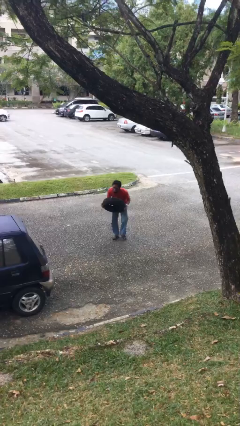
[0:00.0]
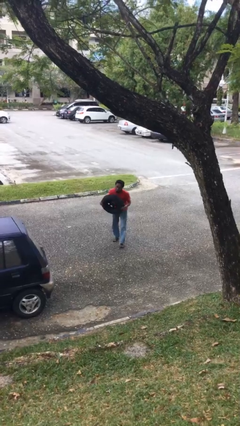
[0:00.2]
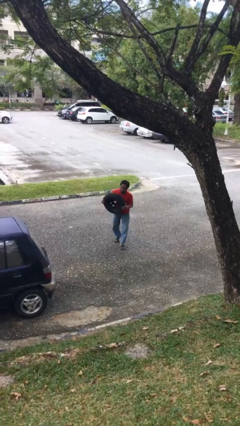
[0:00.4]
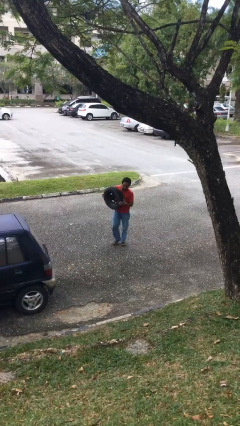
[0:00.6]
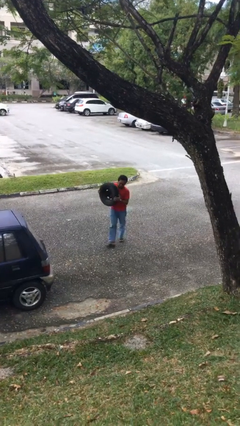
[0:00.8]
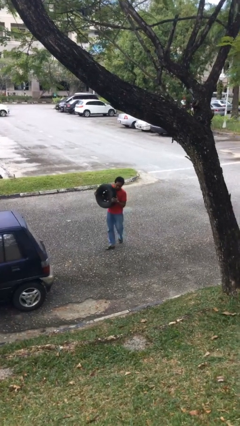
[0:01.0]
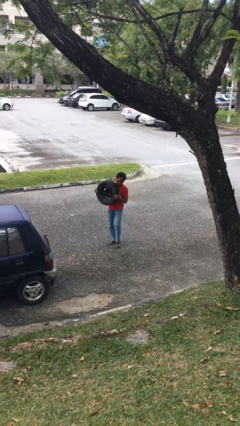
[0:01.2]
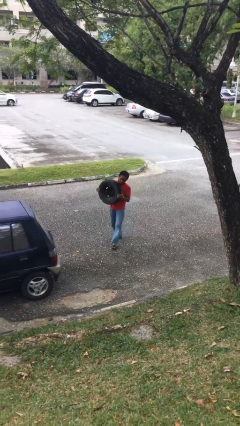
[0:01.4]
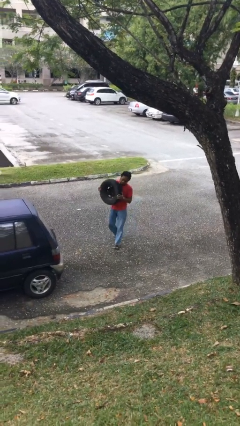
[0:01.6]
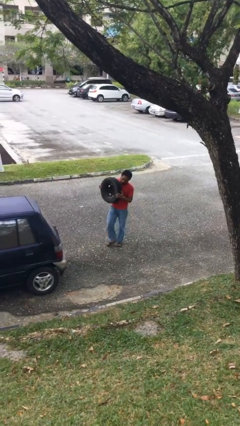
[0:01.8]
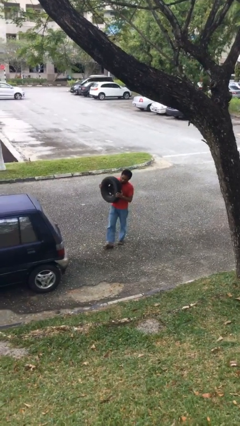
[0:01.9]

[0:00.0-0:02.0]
person carries heavy object

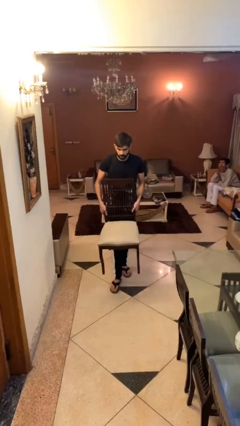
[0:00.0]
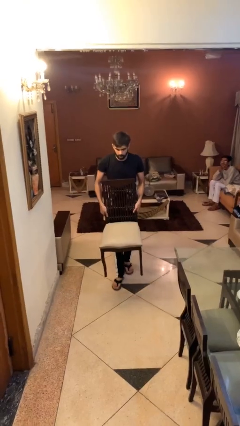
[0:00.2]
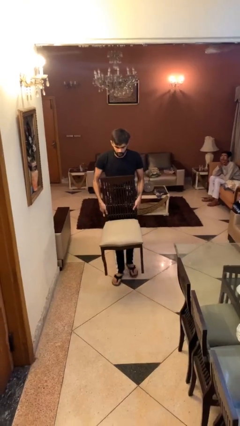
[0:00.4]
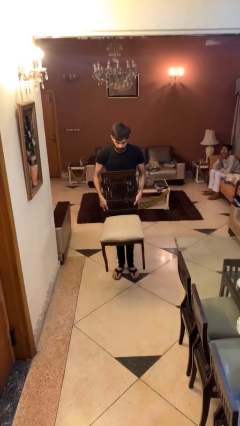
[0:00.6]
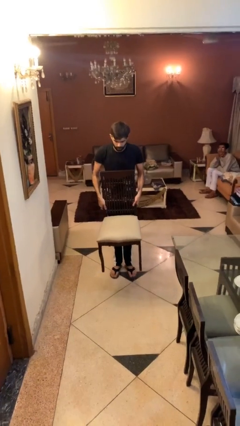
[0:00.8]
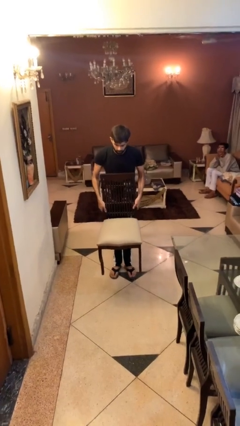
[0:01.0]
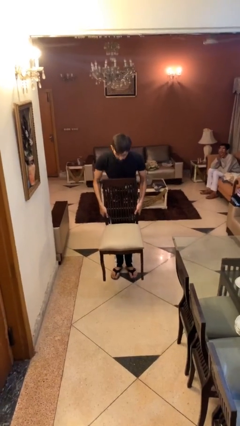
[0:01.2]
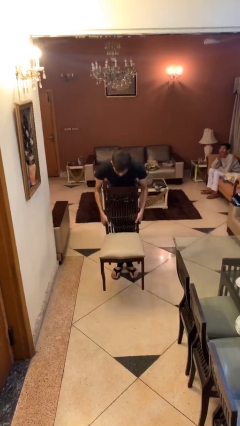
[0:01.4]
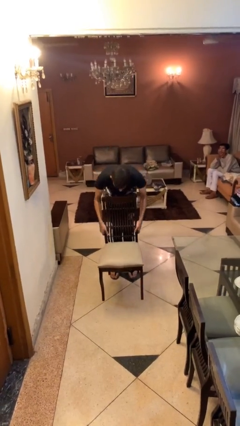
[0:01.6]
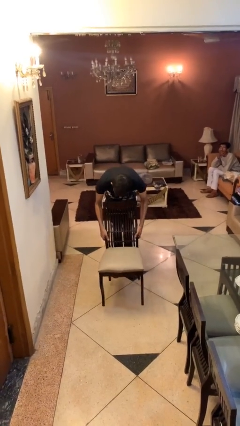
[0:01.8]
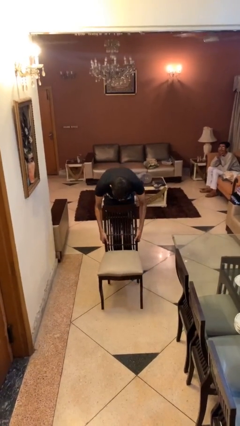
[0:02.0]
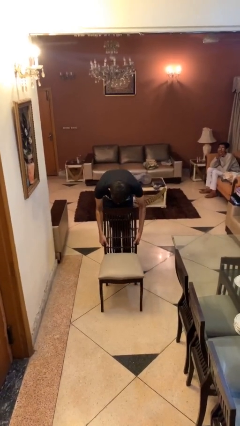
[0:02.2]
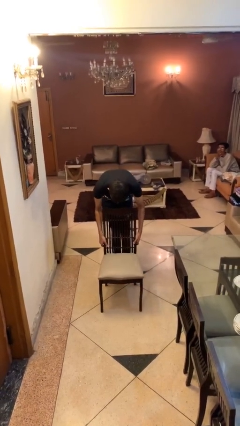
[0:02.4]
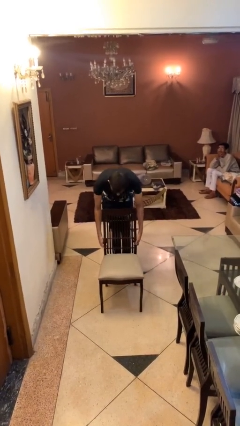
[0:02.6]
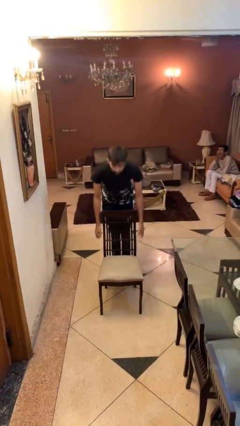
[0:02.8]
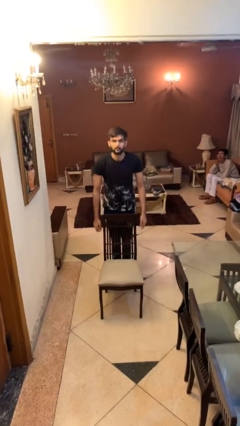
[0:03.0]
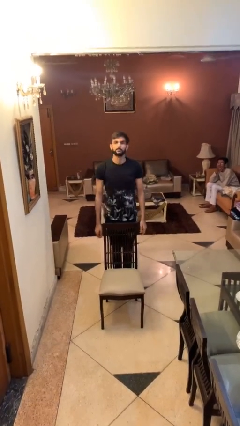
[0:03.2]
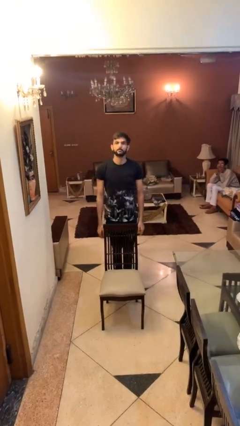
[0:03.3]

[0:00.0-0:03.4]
person puts down object on floor

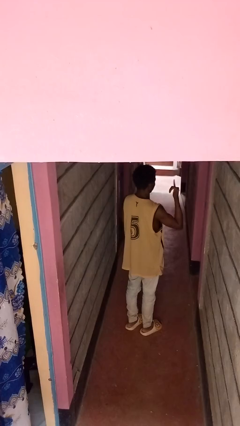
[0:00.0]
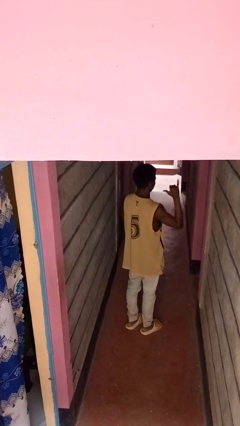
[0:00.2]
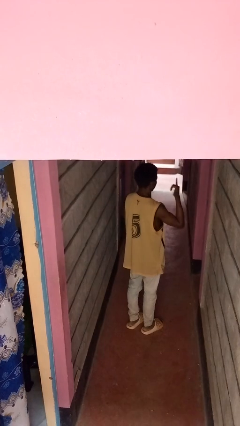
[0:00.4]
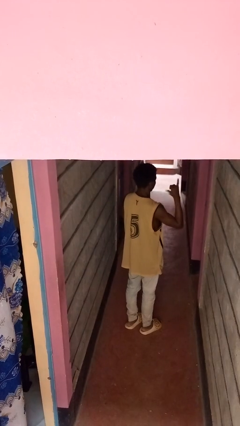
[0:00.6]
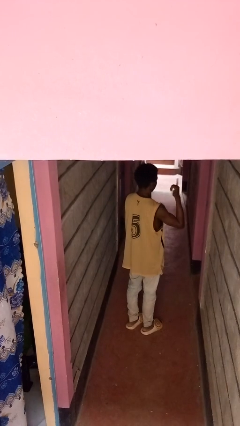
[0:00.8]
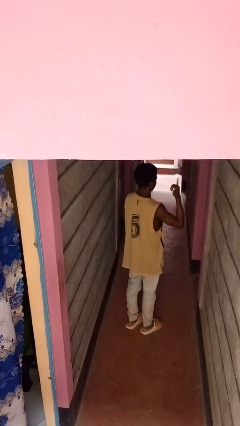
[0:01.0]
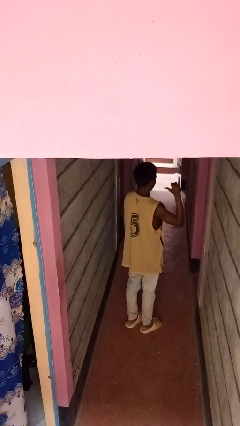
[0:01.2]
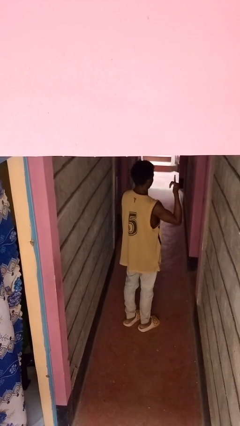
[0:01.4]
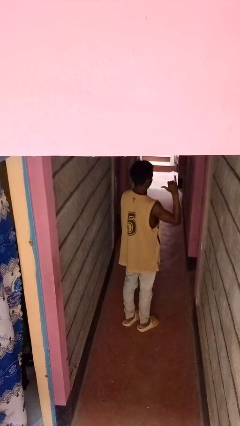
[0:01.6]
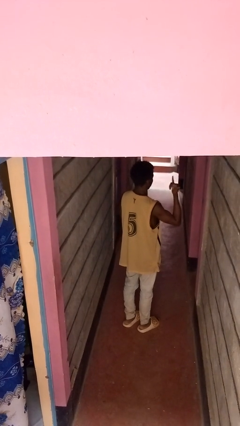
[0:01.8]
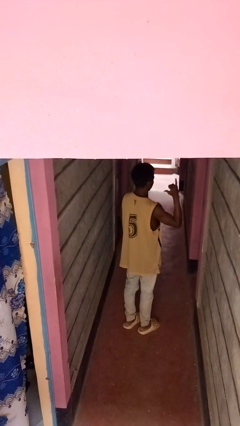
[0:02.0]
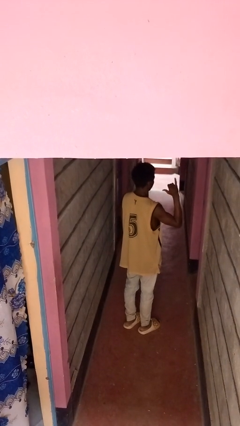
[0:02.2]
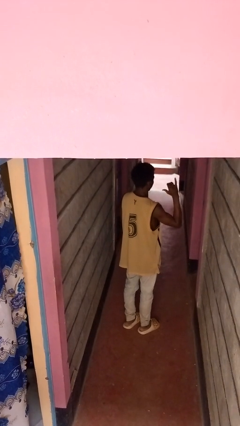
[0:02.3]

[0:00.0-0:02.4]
person gestures hang loose

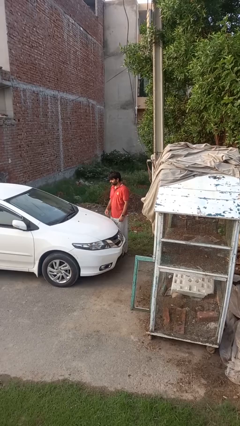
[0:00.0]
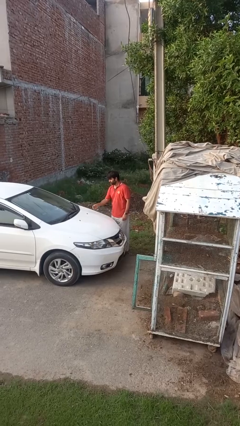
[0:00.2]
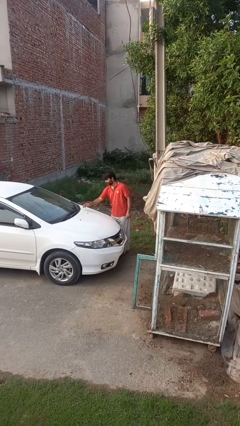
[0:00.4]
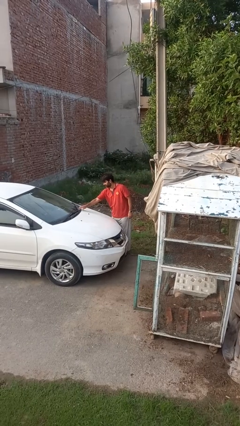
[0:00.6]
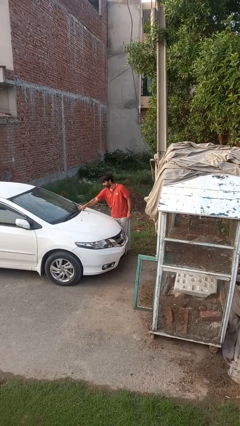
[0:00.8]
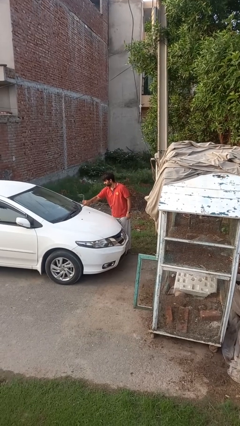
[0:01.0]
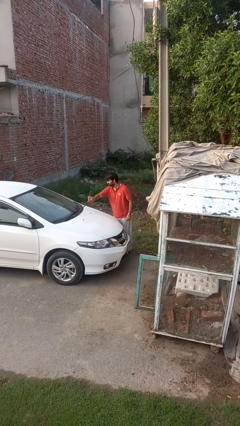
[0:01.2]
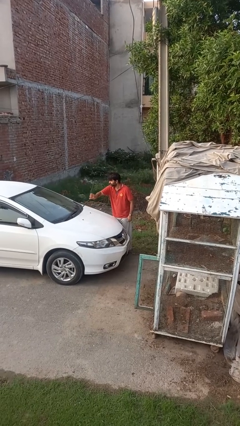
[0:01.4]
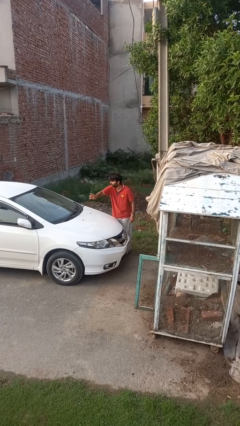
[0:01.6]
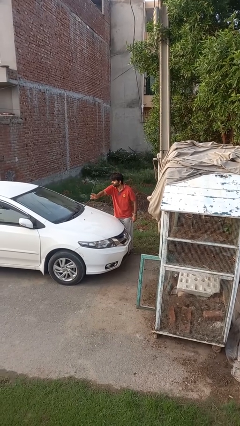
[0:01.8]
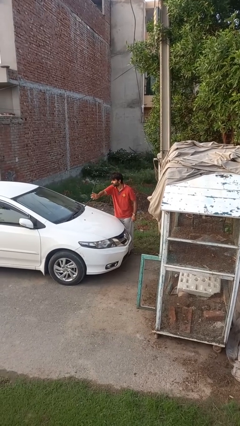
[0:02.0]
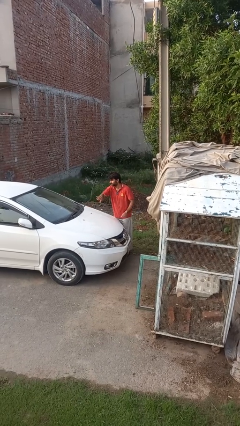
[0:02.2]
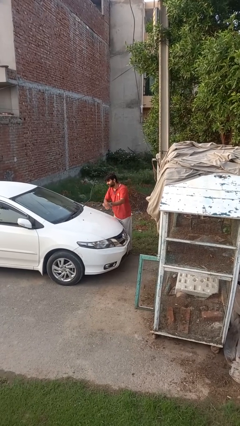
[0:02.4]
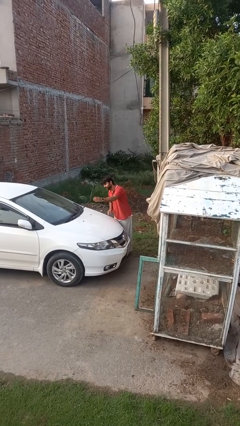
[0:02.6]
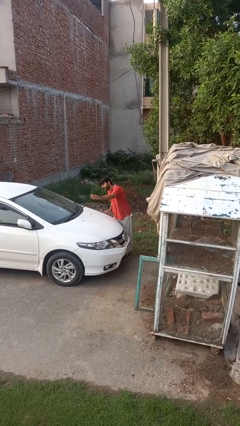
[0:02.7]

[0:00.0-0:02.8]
person flips up car wipers

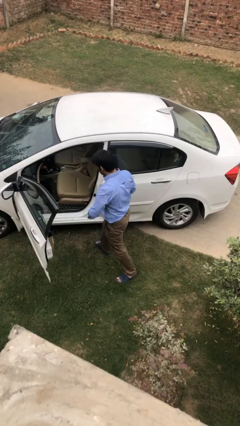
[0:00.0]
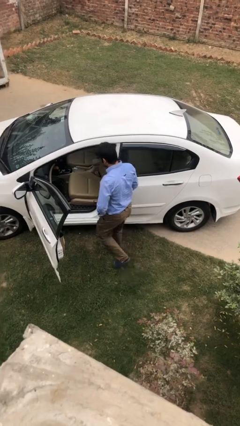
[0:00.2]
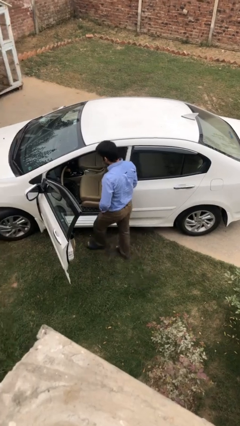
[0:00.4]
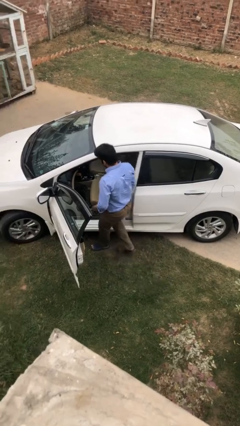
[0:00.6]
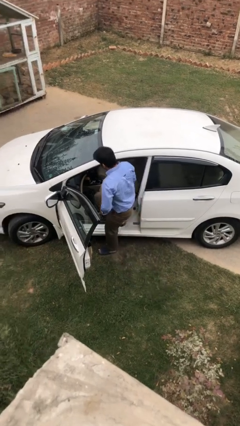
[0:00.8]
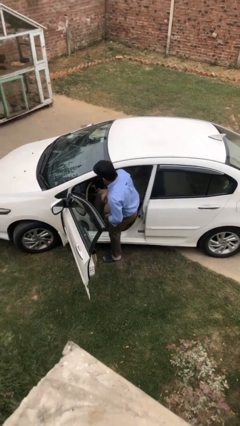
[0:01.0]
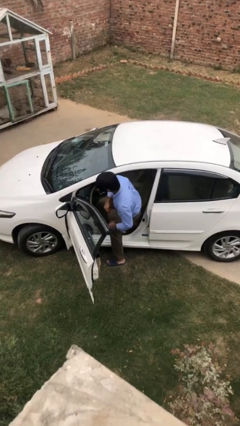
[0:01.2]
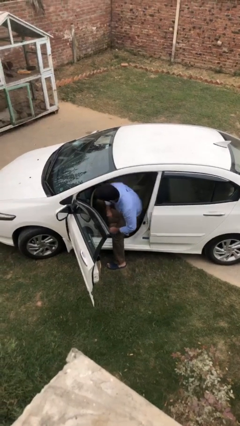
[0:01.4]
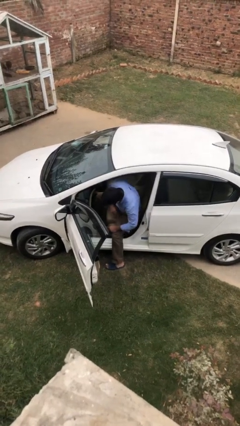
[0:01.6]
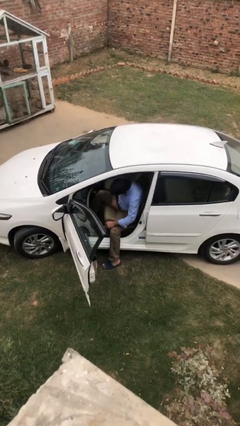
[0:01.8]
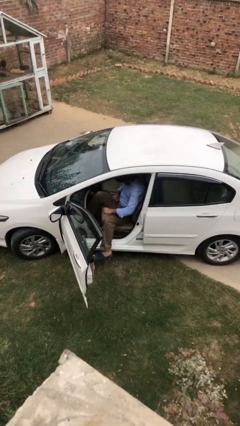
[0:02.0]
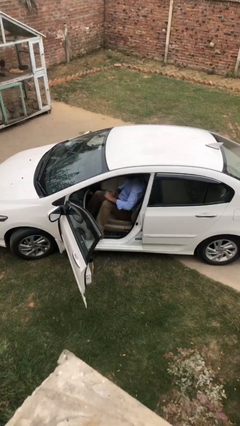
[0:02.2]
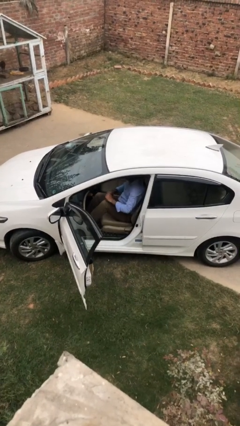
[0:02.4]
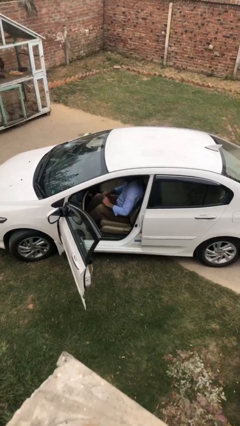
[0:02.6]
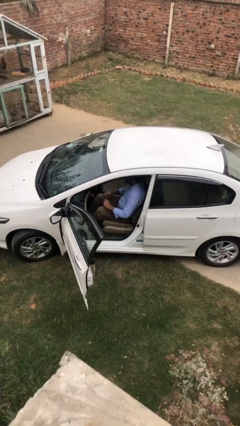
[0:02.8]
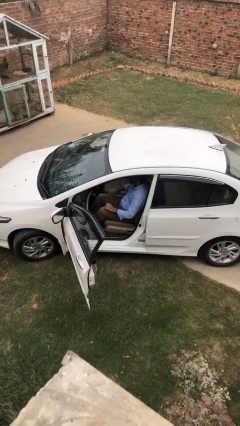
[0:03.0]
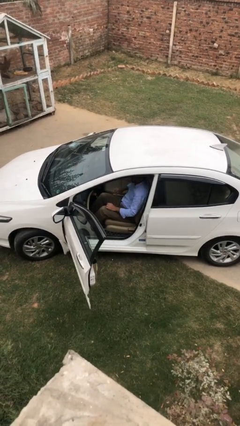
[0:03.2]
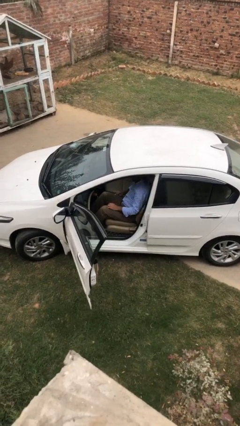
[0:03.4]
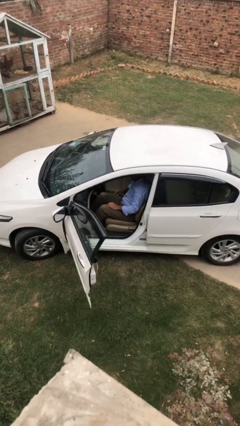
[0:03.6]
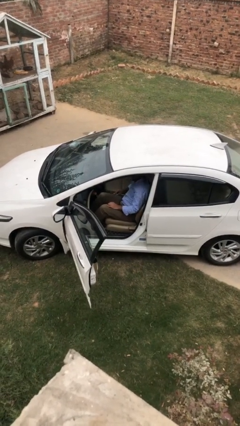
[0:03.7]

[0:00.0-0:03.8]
person enters car

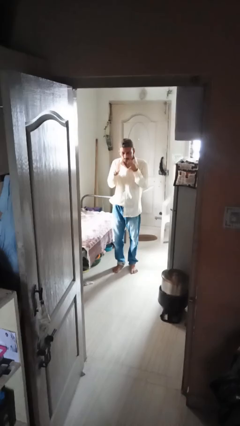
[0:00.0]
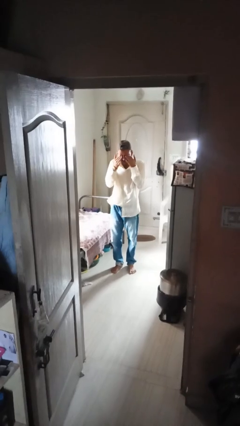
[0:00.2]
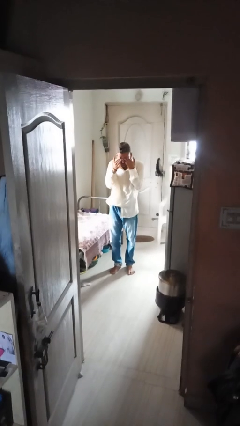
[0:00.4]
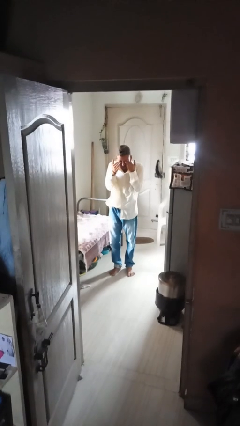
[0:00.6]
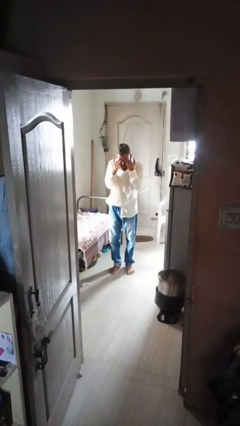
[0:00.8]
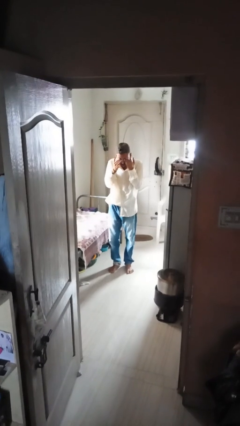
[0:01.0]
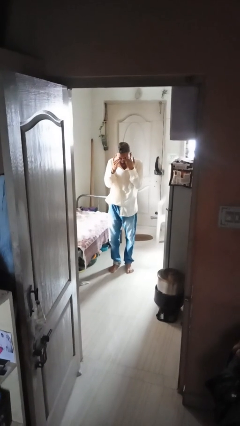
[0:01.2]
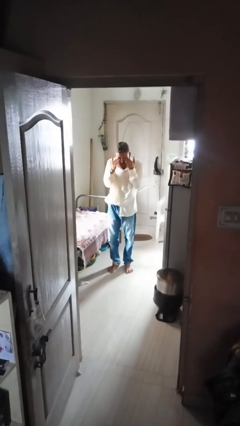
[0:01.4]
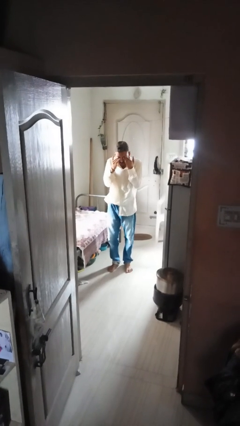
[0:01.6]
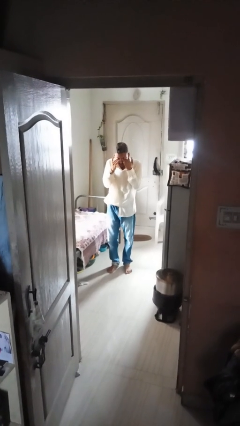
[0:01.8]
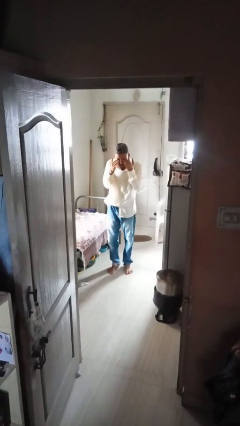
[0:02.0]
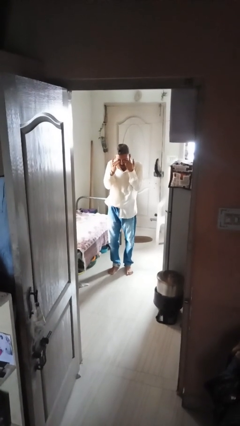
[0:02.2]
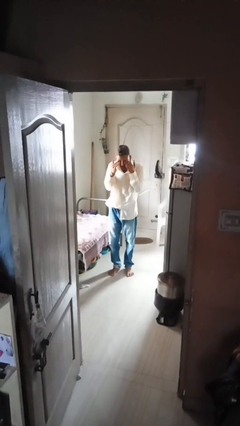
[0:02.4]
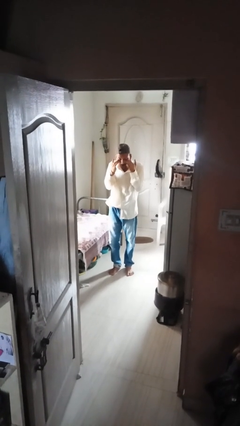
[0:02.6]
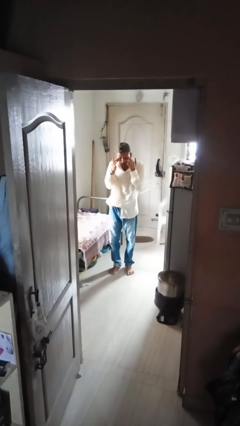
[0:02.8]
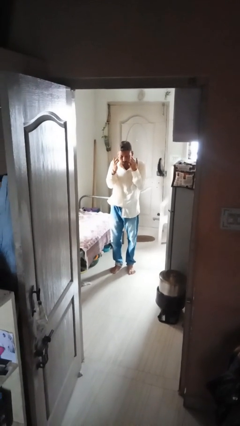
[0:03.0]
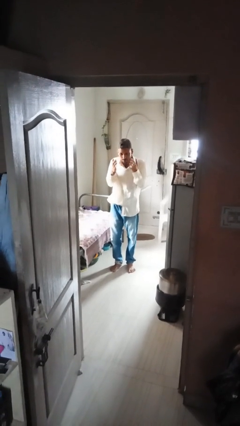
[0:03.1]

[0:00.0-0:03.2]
person rubs eyes
